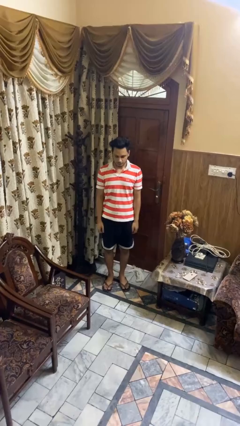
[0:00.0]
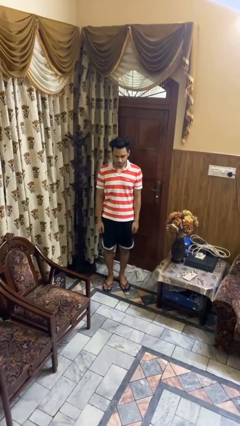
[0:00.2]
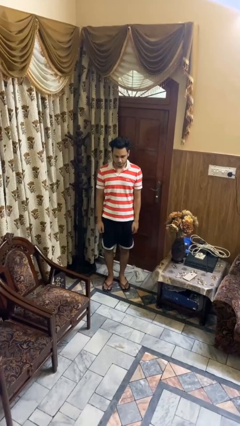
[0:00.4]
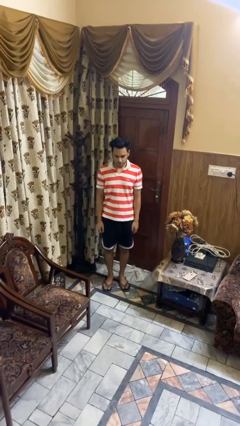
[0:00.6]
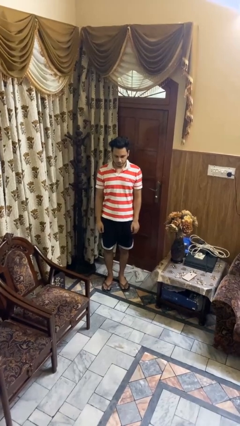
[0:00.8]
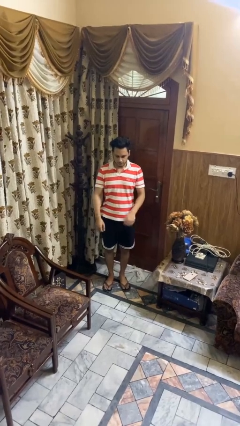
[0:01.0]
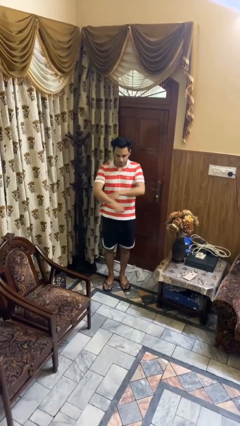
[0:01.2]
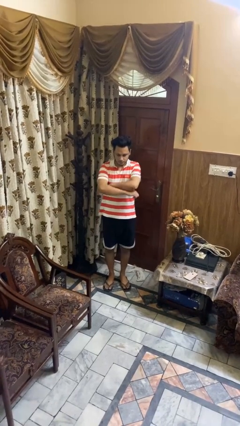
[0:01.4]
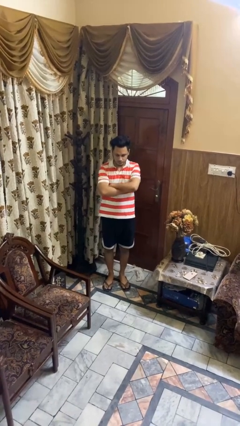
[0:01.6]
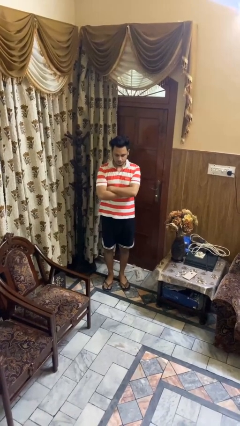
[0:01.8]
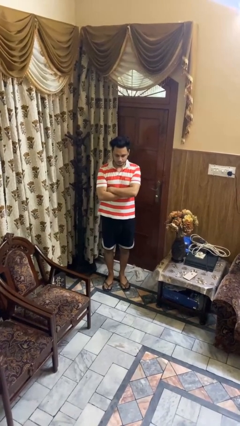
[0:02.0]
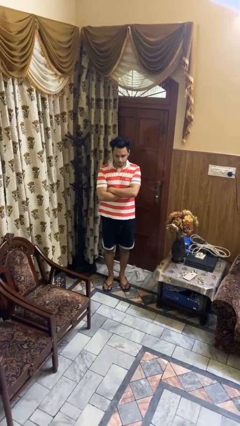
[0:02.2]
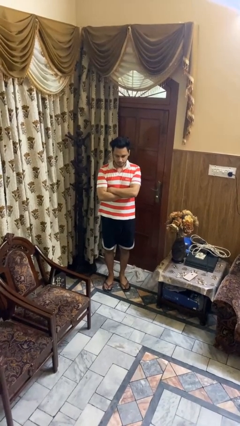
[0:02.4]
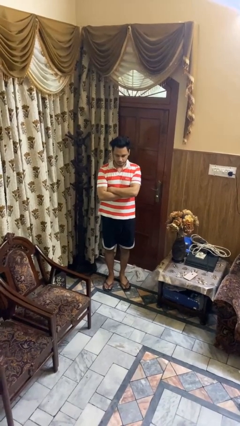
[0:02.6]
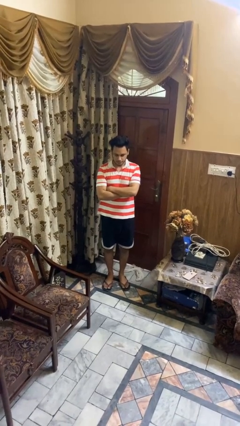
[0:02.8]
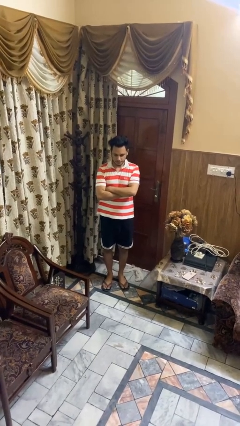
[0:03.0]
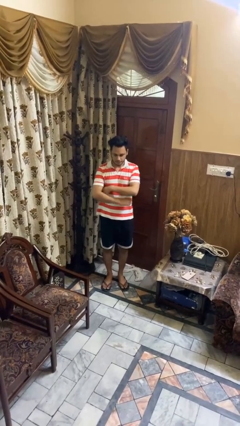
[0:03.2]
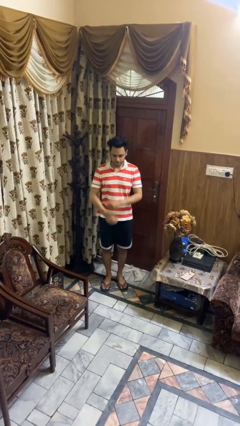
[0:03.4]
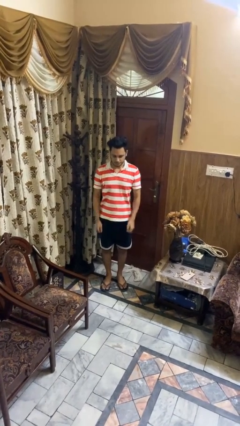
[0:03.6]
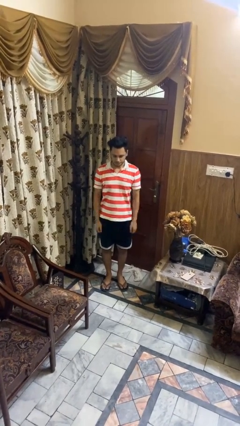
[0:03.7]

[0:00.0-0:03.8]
person crosses arms

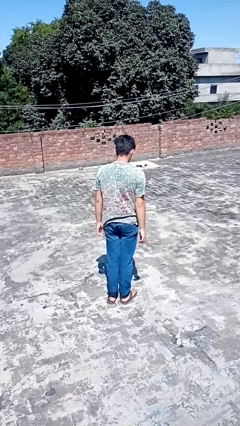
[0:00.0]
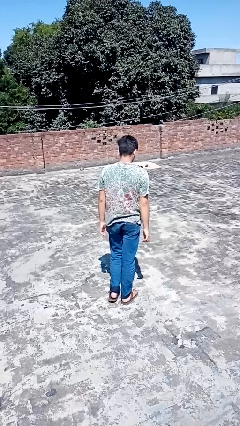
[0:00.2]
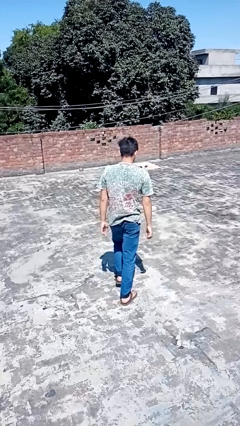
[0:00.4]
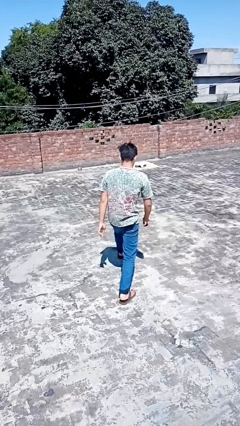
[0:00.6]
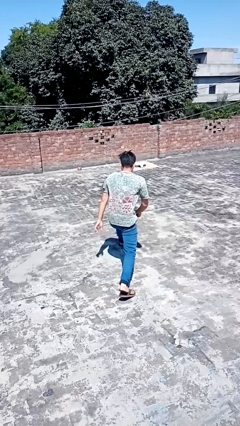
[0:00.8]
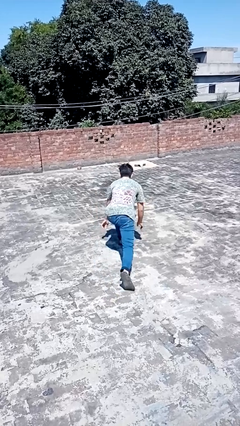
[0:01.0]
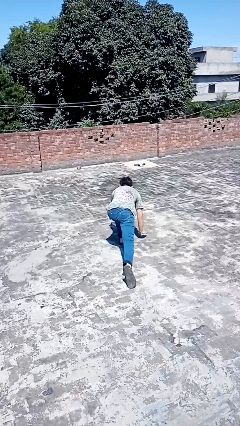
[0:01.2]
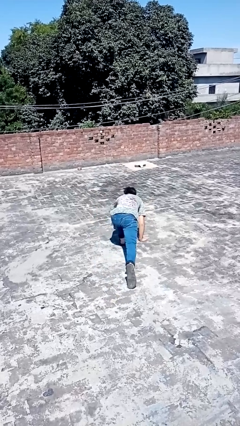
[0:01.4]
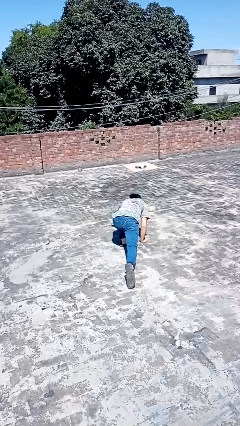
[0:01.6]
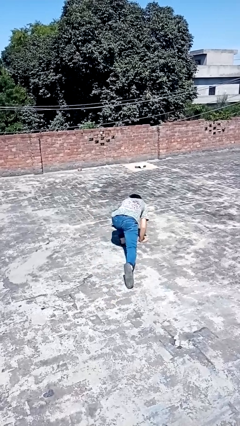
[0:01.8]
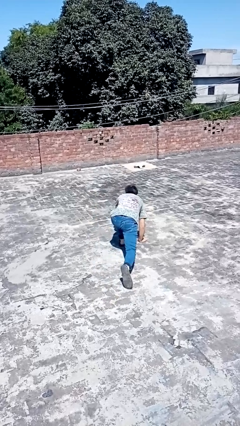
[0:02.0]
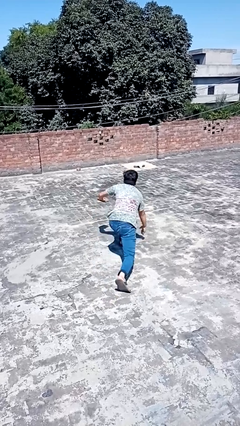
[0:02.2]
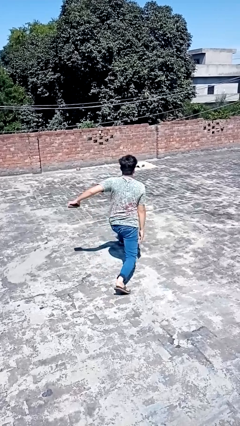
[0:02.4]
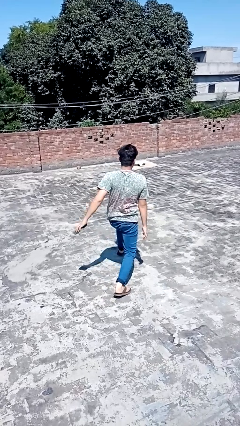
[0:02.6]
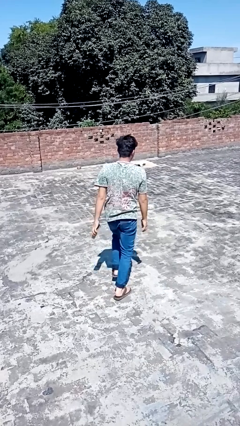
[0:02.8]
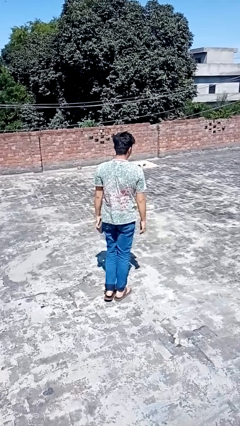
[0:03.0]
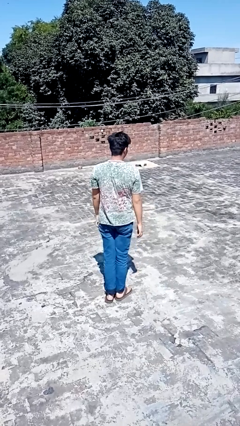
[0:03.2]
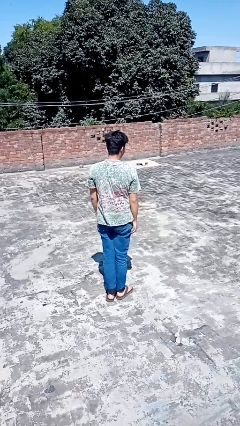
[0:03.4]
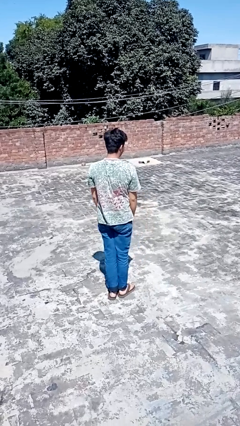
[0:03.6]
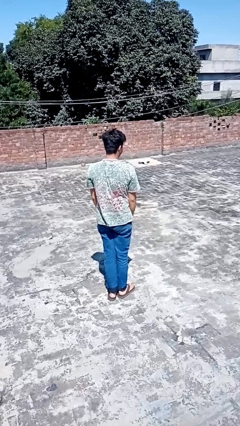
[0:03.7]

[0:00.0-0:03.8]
person picks up object from floor

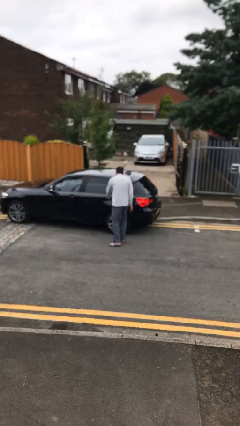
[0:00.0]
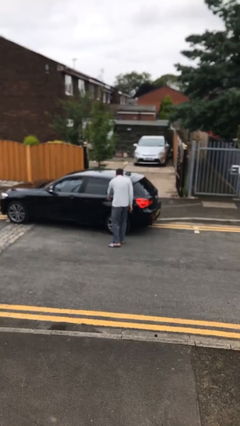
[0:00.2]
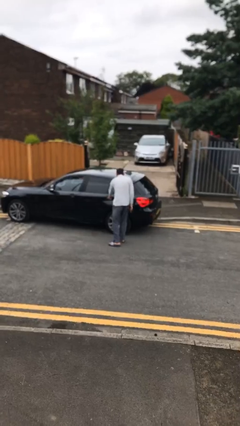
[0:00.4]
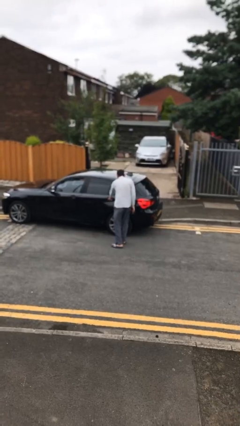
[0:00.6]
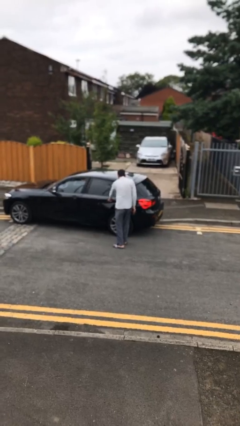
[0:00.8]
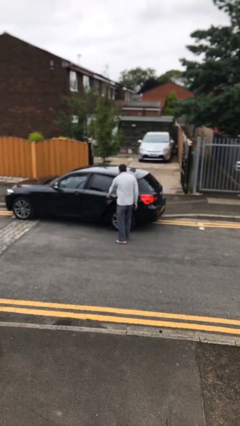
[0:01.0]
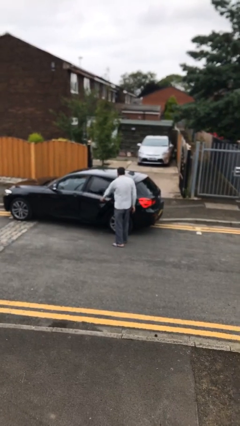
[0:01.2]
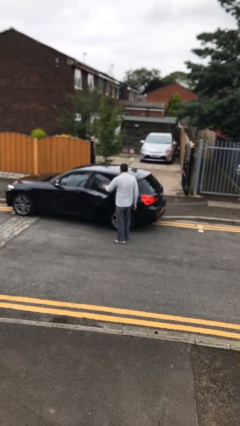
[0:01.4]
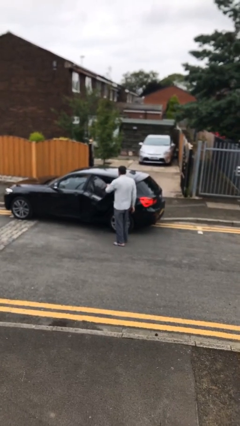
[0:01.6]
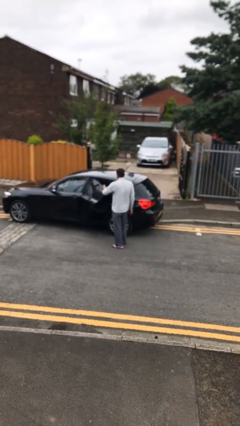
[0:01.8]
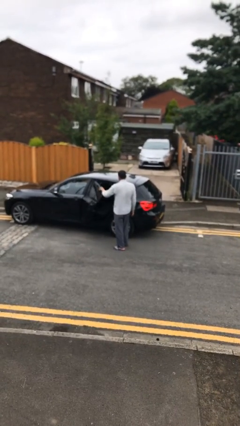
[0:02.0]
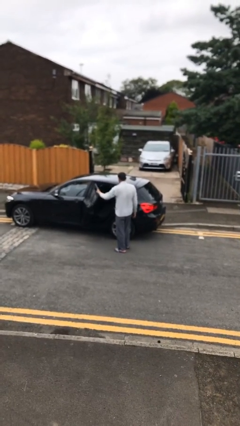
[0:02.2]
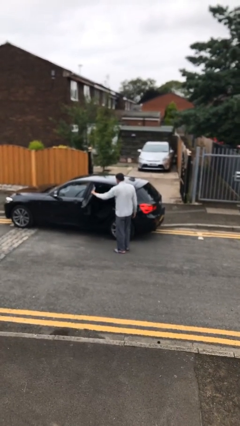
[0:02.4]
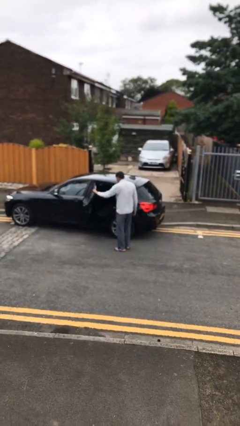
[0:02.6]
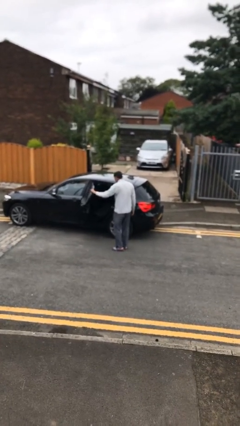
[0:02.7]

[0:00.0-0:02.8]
person opens car door

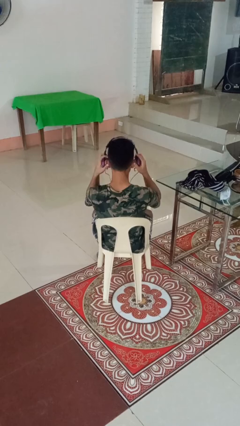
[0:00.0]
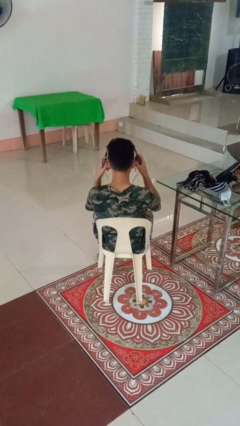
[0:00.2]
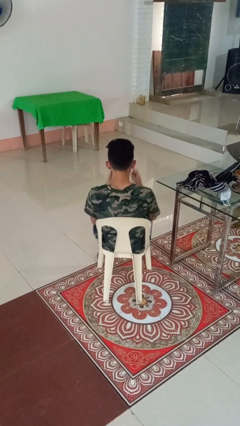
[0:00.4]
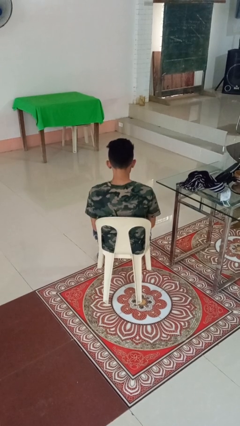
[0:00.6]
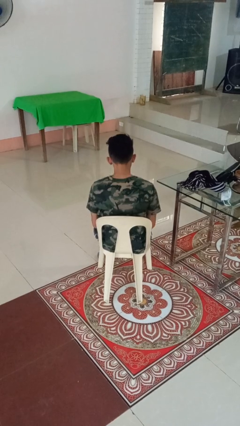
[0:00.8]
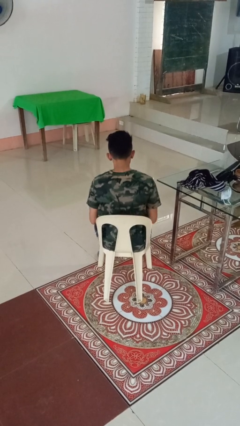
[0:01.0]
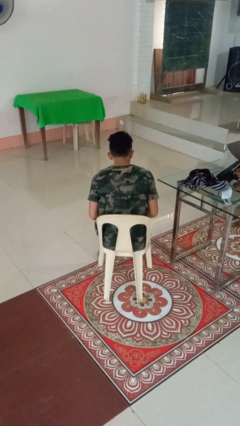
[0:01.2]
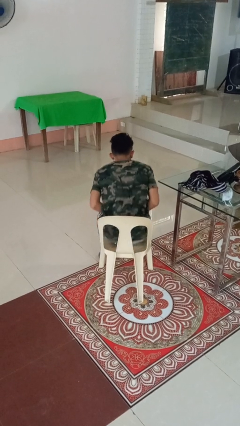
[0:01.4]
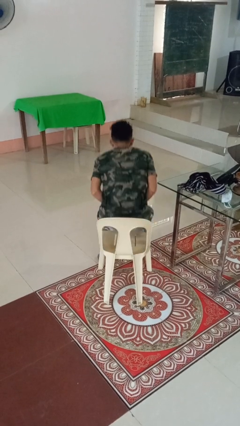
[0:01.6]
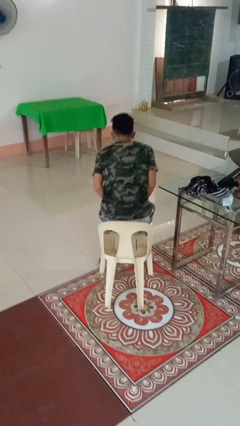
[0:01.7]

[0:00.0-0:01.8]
person takes off headphones

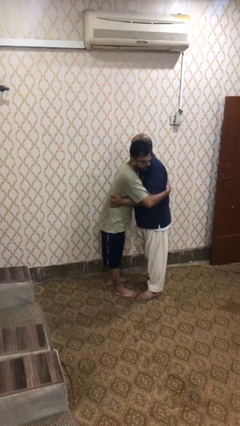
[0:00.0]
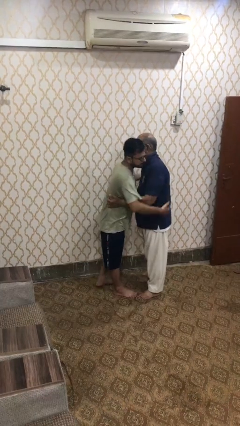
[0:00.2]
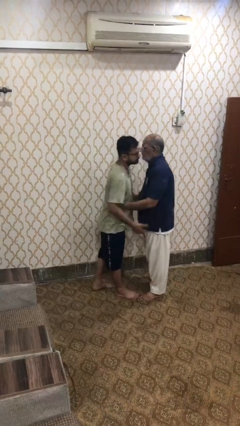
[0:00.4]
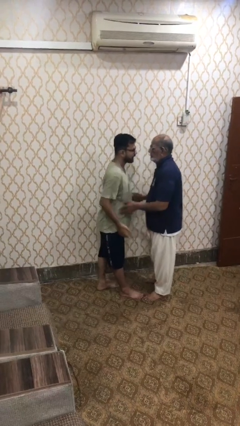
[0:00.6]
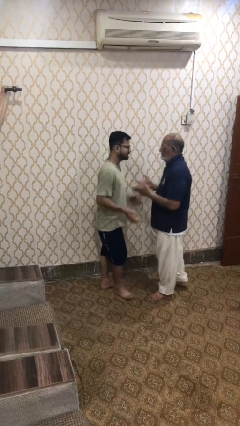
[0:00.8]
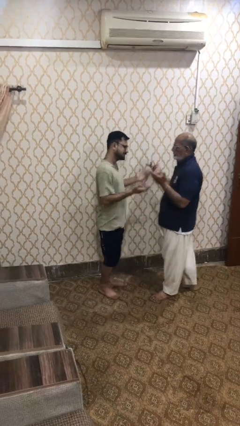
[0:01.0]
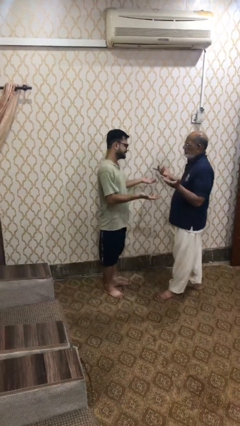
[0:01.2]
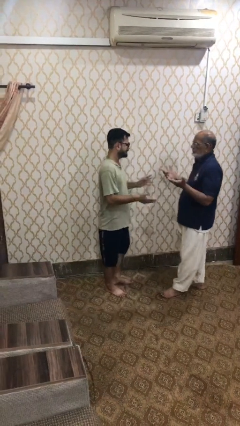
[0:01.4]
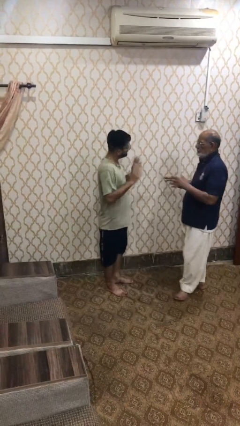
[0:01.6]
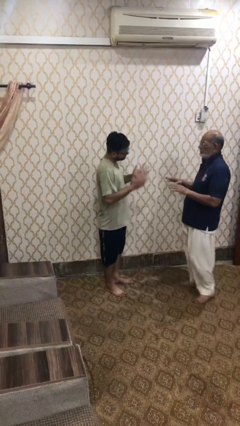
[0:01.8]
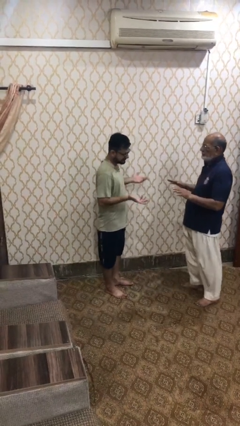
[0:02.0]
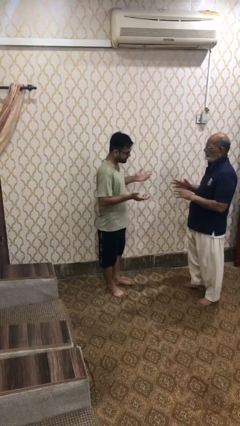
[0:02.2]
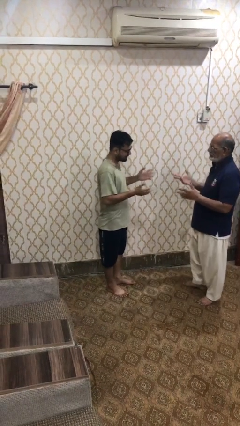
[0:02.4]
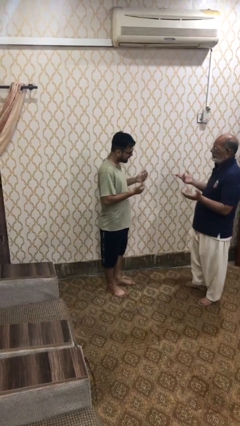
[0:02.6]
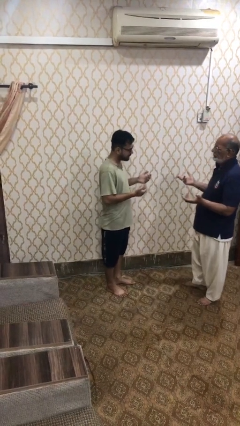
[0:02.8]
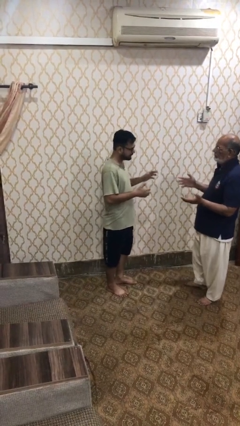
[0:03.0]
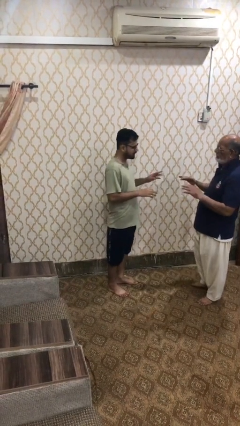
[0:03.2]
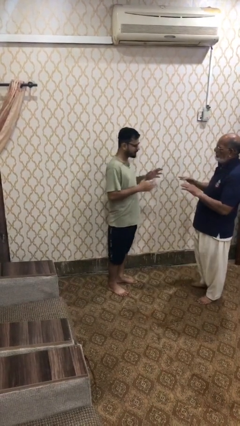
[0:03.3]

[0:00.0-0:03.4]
person talks to person

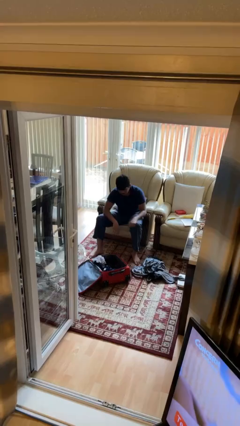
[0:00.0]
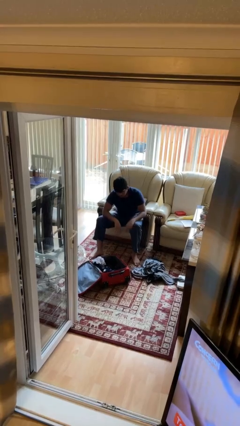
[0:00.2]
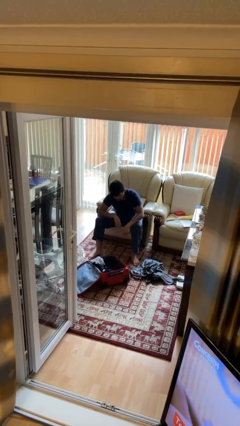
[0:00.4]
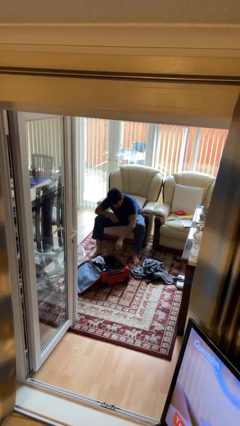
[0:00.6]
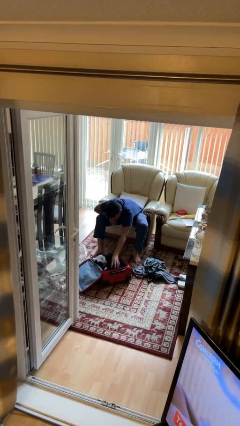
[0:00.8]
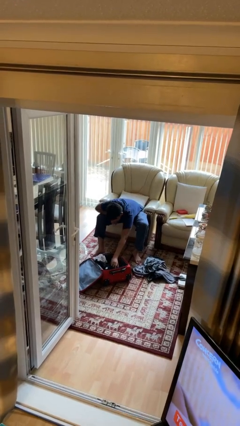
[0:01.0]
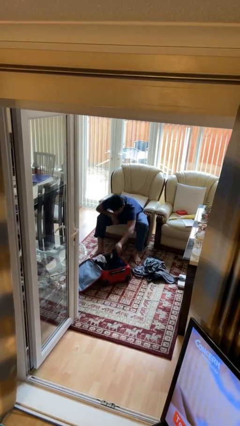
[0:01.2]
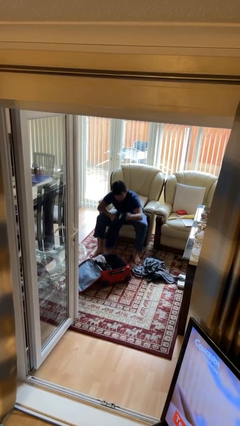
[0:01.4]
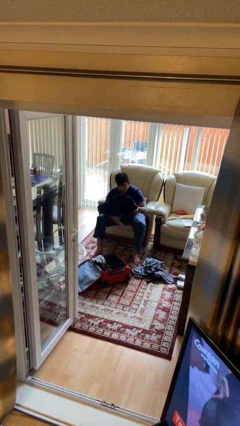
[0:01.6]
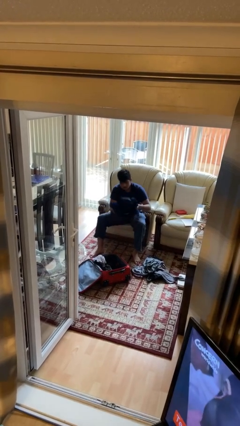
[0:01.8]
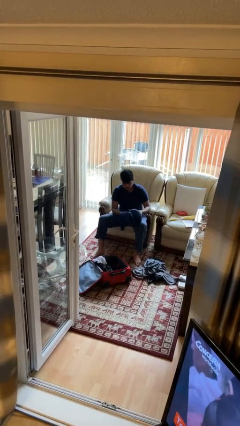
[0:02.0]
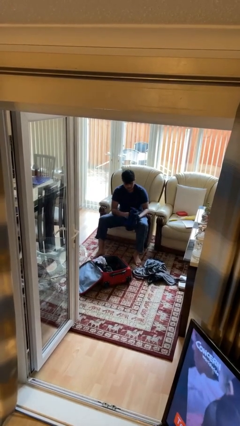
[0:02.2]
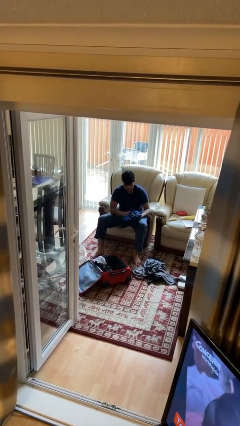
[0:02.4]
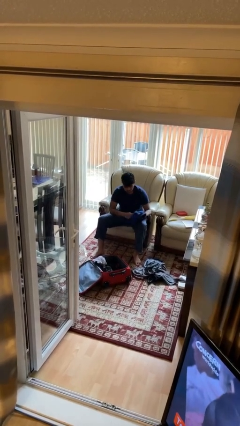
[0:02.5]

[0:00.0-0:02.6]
person unloads clothes from suitcase
